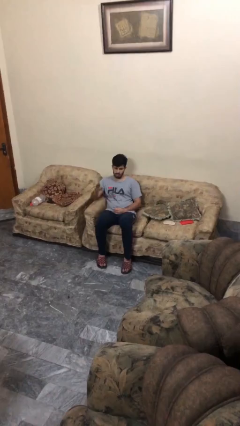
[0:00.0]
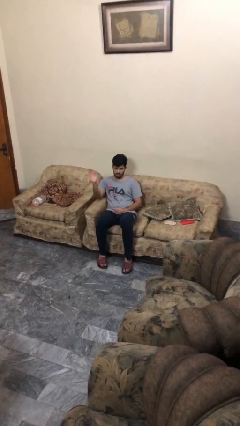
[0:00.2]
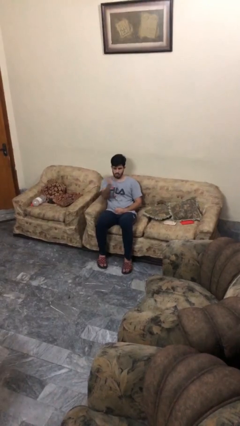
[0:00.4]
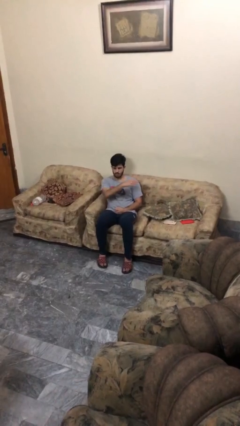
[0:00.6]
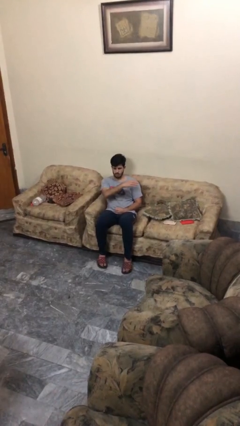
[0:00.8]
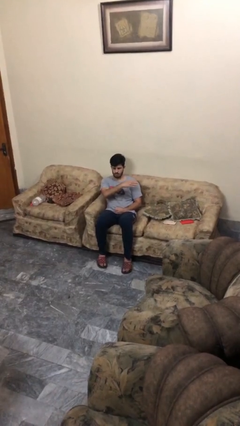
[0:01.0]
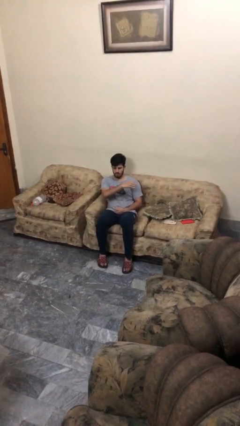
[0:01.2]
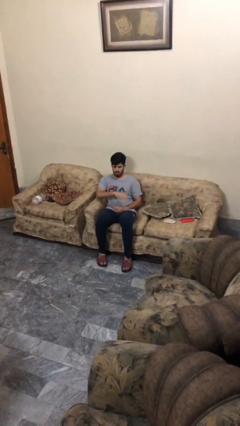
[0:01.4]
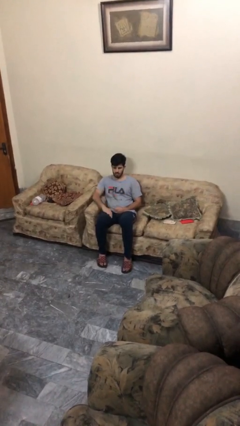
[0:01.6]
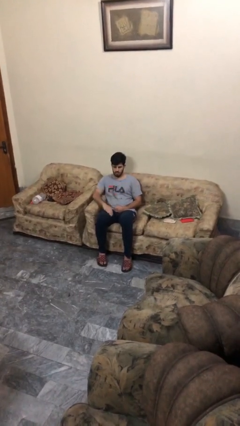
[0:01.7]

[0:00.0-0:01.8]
person gestures swipe left

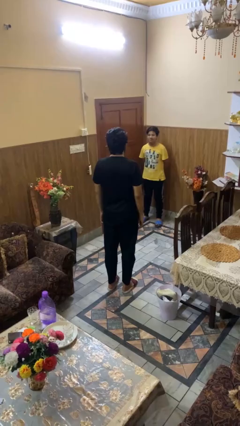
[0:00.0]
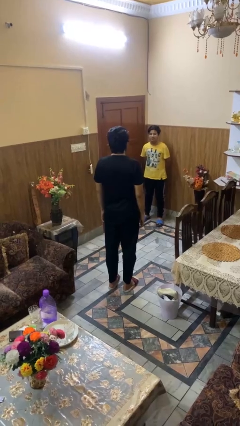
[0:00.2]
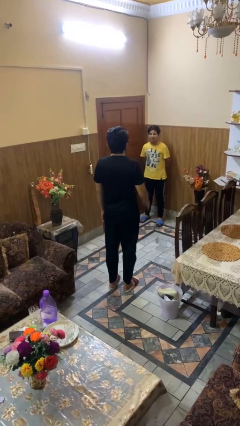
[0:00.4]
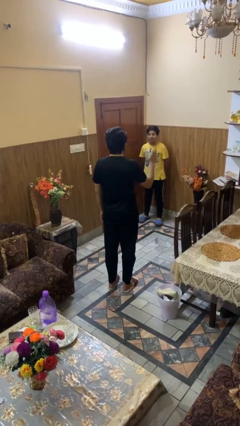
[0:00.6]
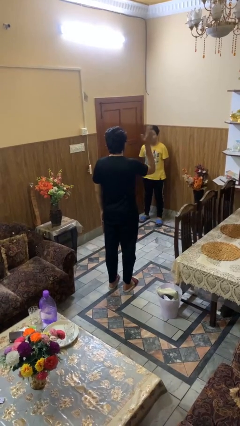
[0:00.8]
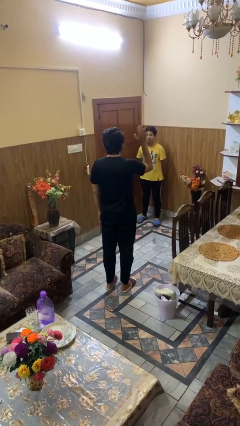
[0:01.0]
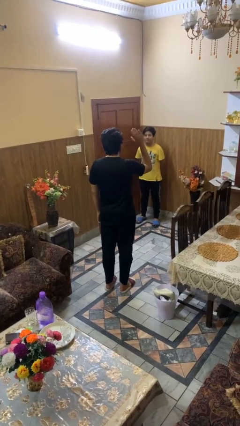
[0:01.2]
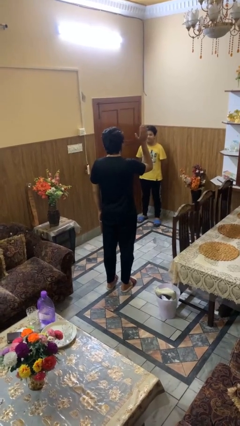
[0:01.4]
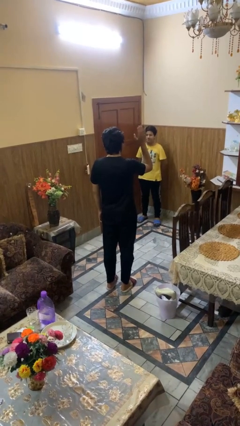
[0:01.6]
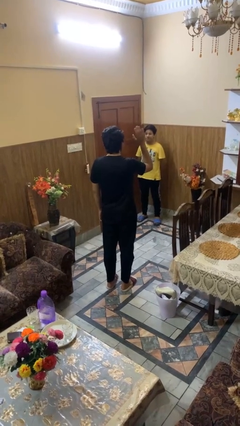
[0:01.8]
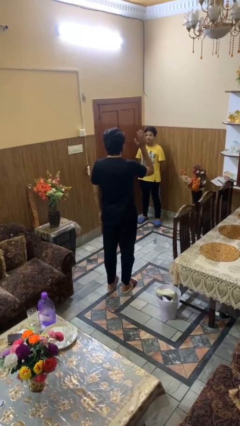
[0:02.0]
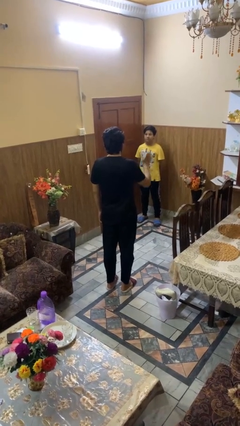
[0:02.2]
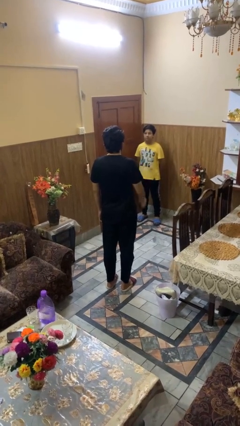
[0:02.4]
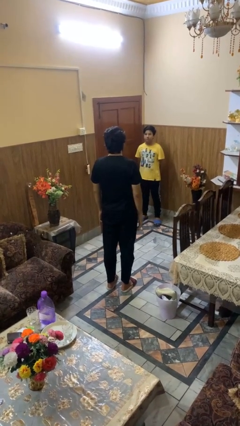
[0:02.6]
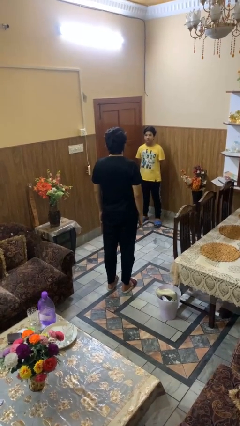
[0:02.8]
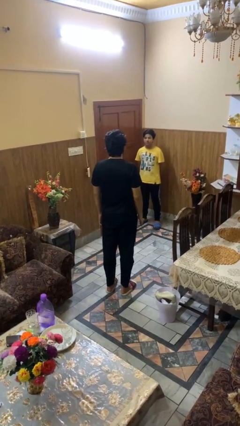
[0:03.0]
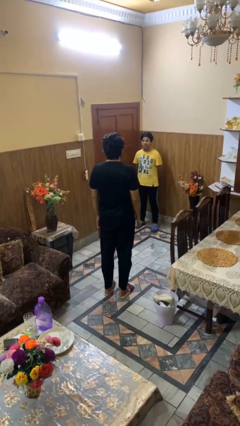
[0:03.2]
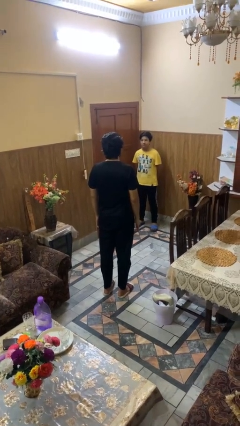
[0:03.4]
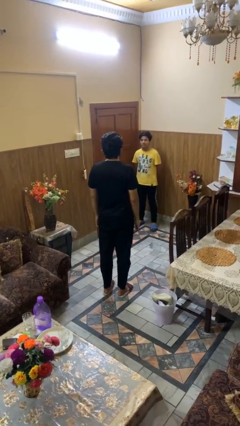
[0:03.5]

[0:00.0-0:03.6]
person waves at person

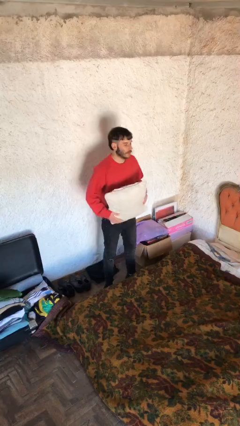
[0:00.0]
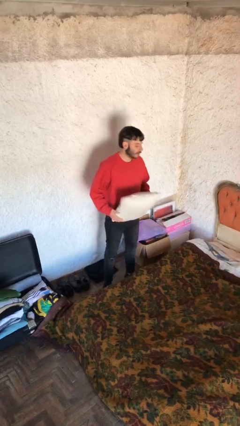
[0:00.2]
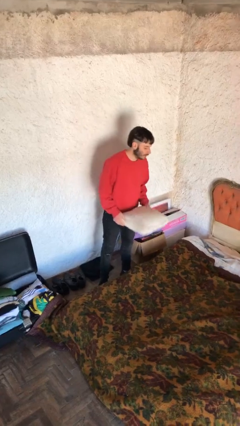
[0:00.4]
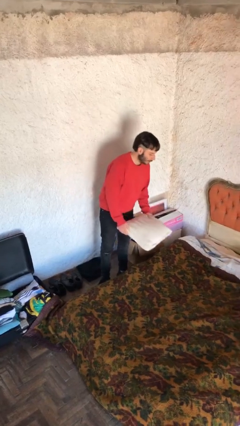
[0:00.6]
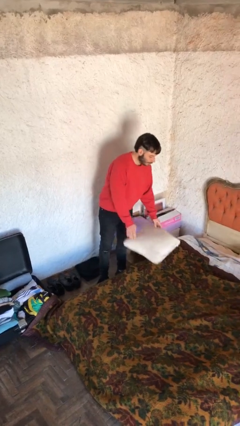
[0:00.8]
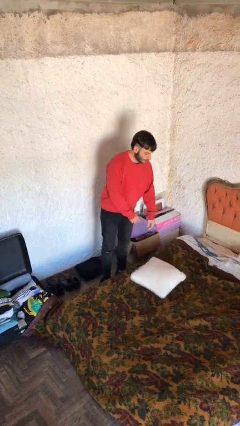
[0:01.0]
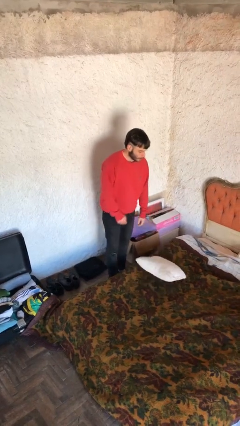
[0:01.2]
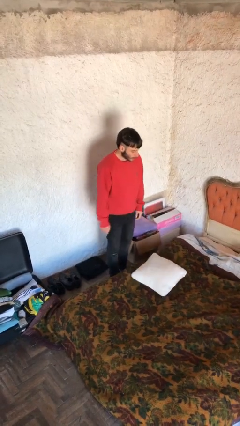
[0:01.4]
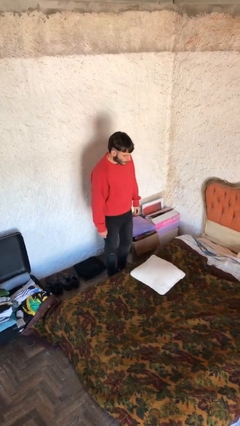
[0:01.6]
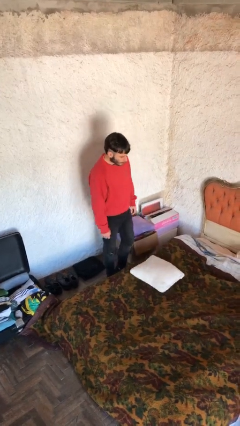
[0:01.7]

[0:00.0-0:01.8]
person puts down object on bed

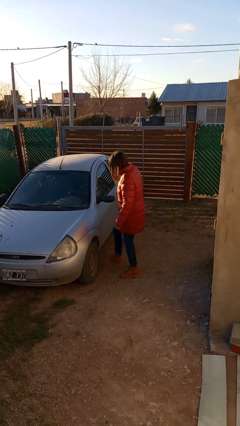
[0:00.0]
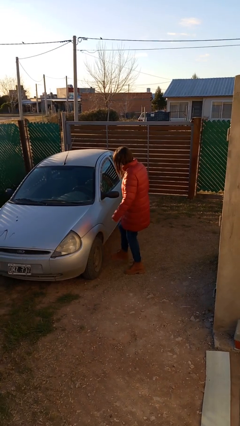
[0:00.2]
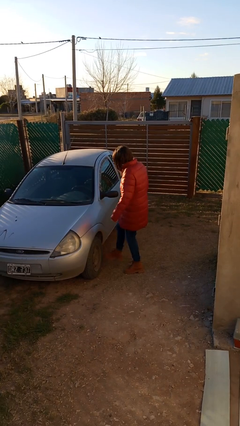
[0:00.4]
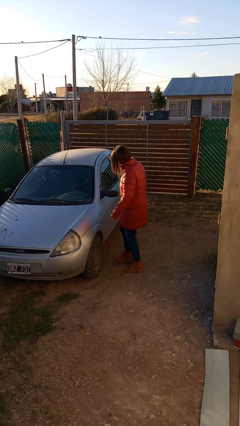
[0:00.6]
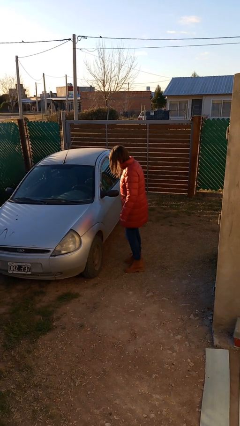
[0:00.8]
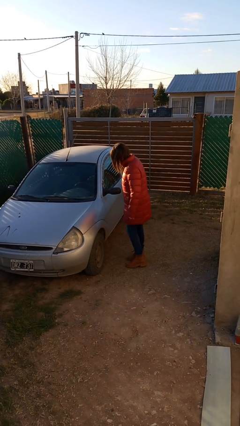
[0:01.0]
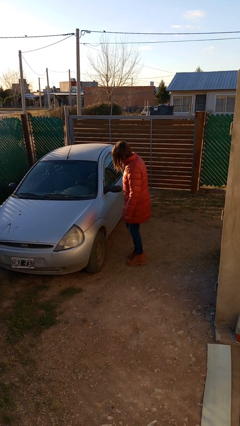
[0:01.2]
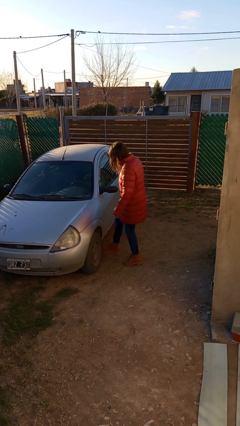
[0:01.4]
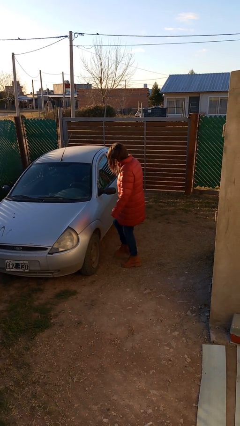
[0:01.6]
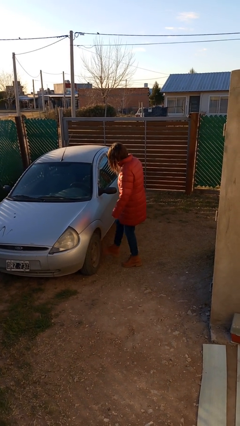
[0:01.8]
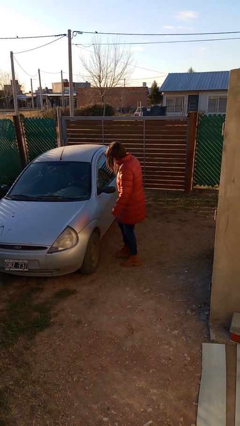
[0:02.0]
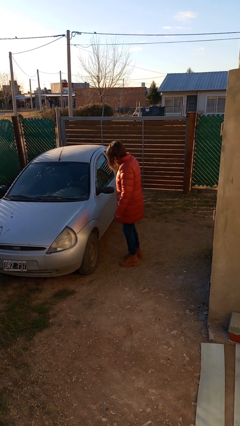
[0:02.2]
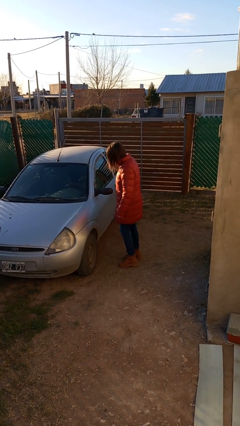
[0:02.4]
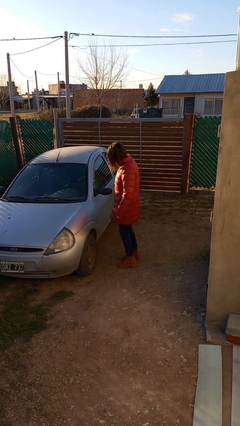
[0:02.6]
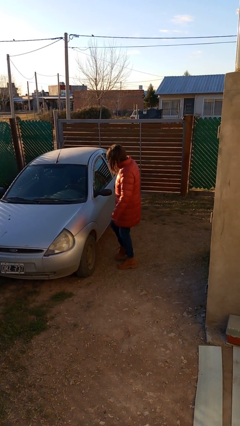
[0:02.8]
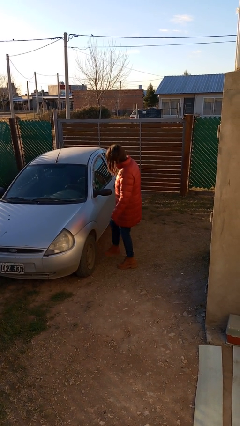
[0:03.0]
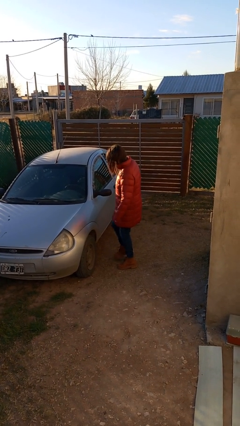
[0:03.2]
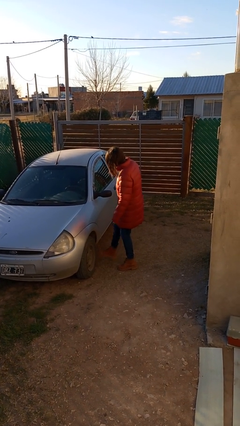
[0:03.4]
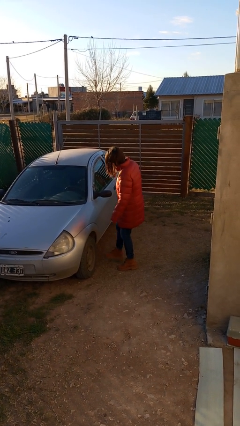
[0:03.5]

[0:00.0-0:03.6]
person kicks car tires

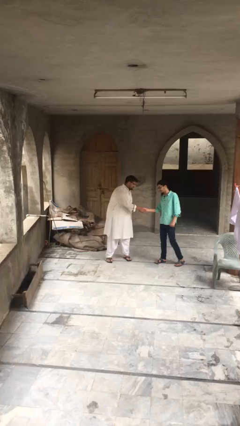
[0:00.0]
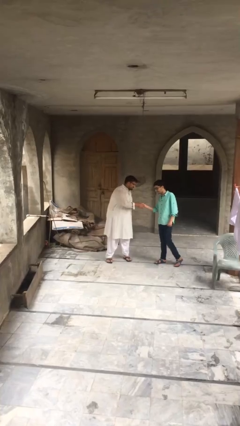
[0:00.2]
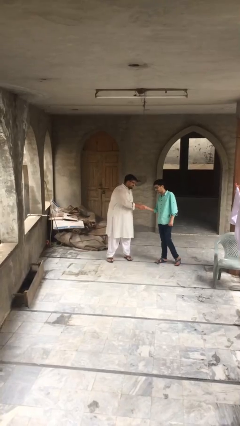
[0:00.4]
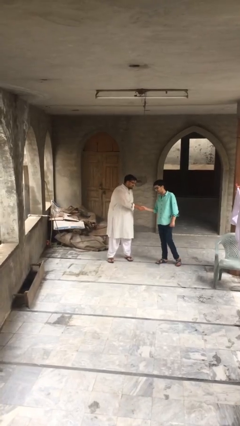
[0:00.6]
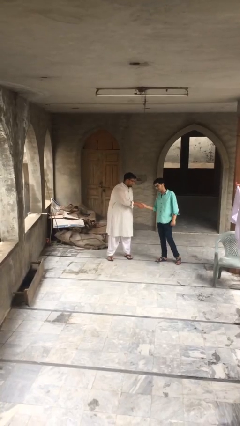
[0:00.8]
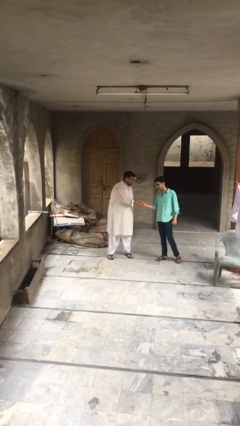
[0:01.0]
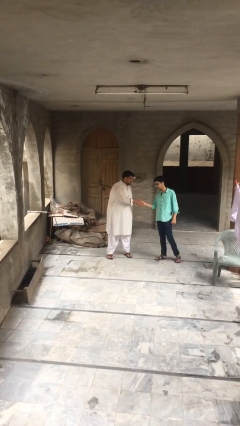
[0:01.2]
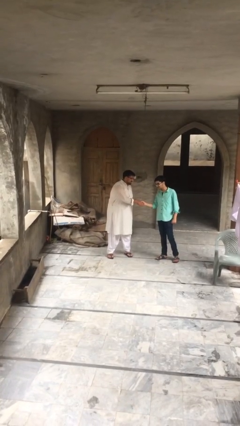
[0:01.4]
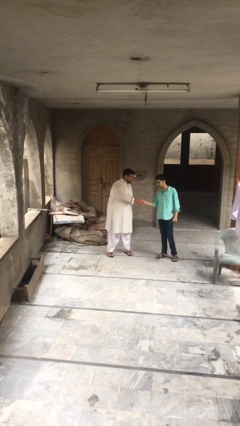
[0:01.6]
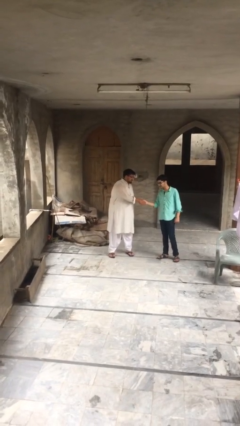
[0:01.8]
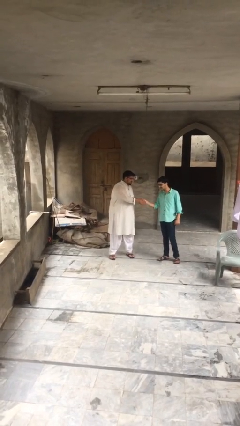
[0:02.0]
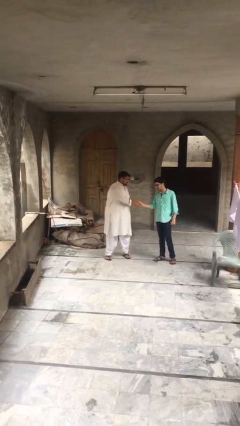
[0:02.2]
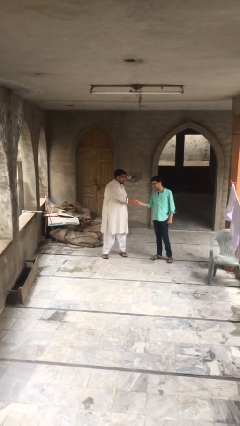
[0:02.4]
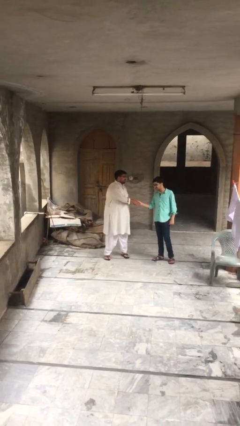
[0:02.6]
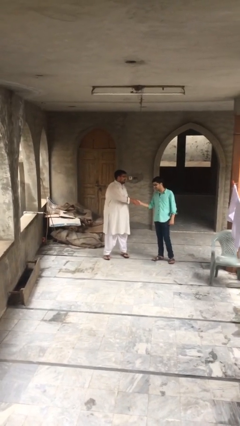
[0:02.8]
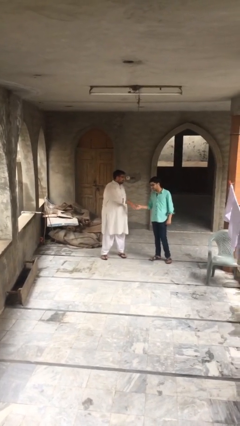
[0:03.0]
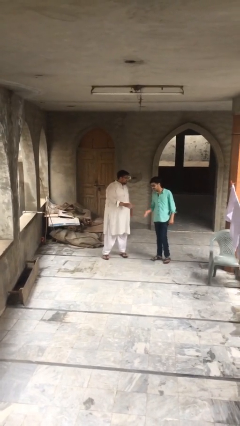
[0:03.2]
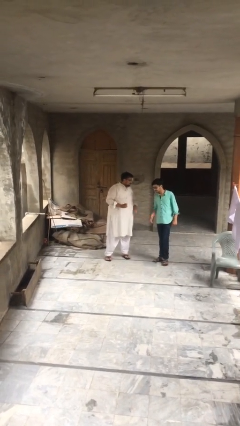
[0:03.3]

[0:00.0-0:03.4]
person shakes hand

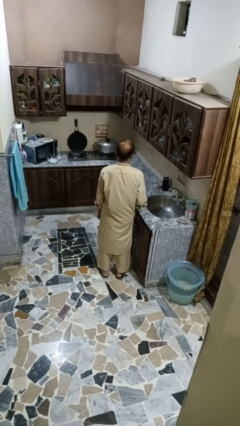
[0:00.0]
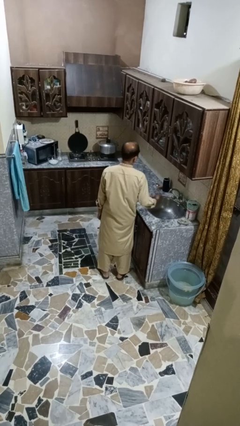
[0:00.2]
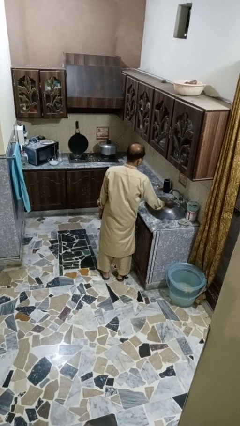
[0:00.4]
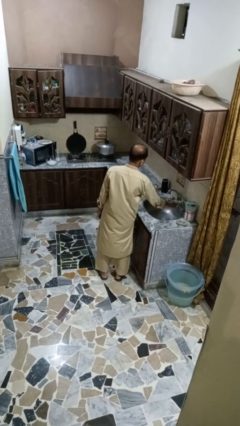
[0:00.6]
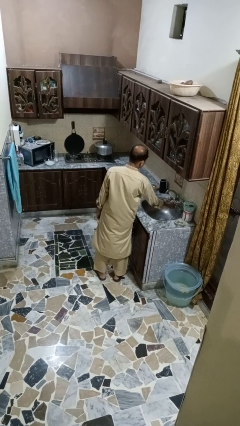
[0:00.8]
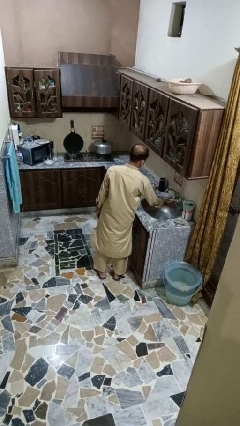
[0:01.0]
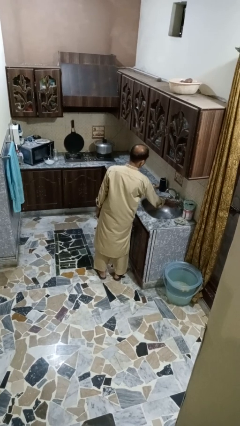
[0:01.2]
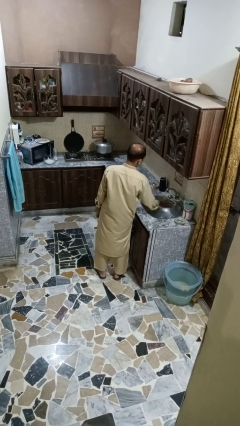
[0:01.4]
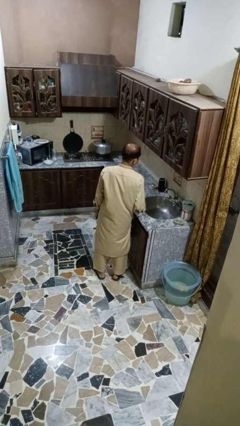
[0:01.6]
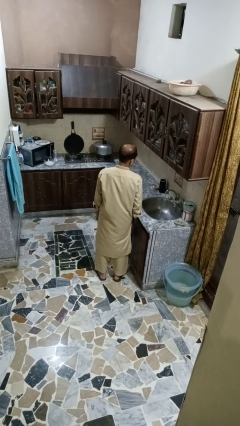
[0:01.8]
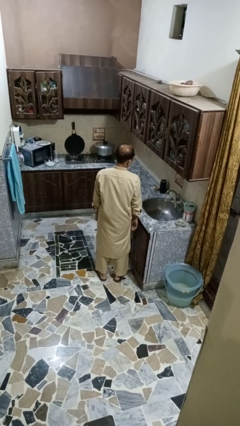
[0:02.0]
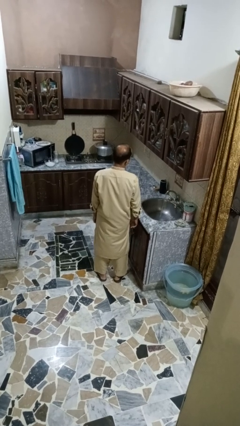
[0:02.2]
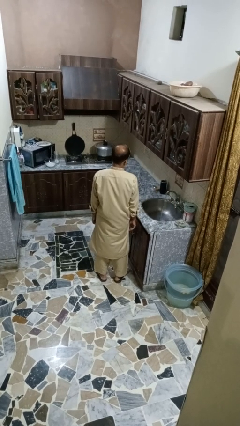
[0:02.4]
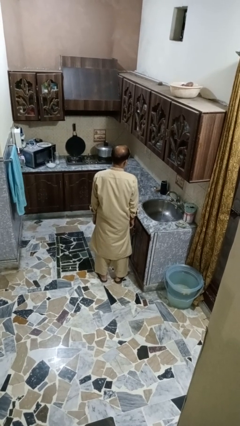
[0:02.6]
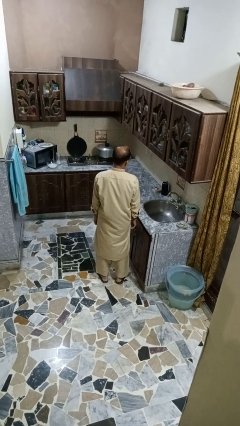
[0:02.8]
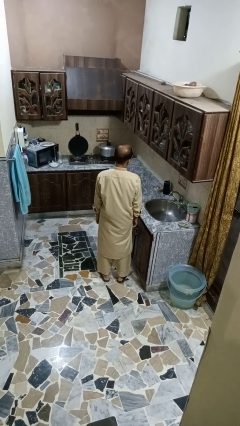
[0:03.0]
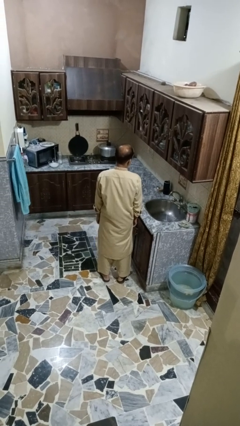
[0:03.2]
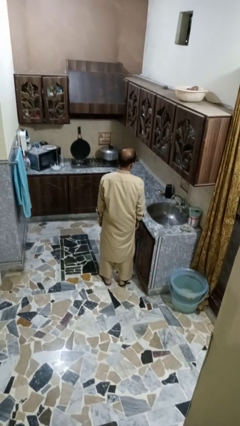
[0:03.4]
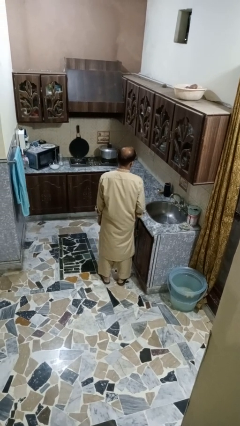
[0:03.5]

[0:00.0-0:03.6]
person turns on faucet
